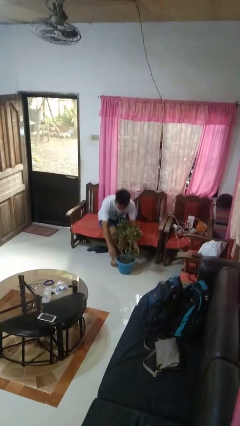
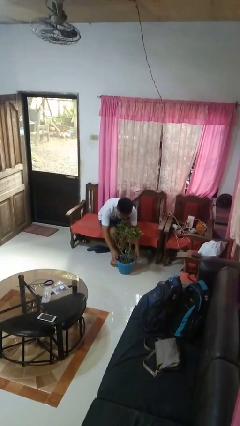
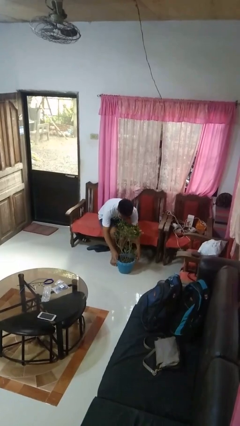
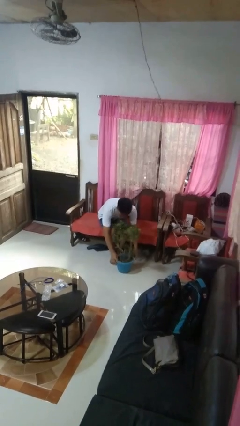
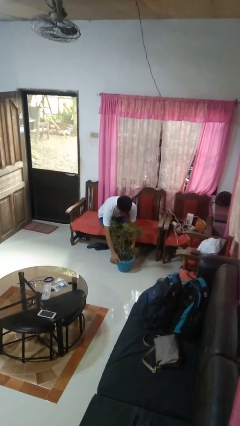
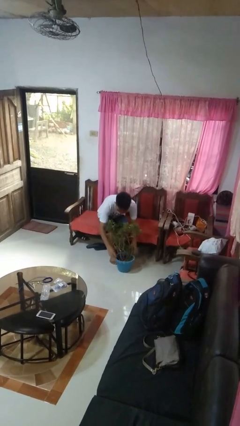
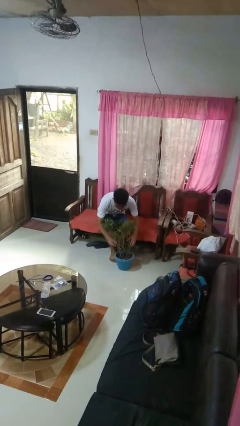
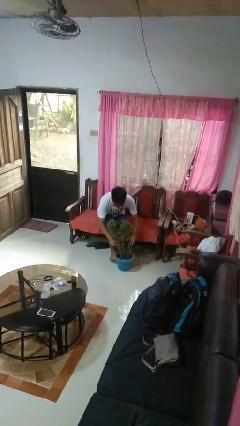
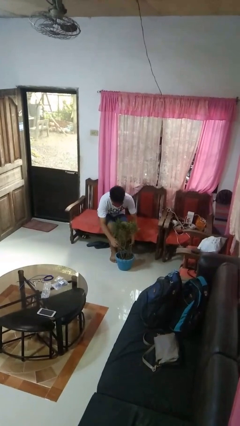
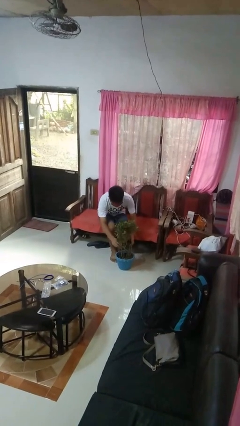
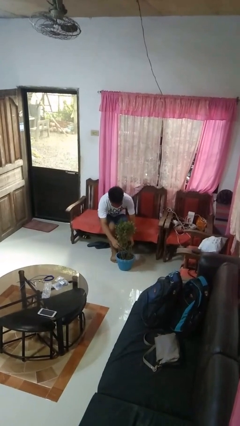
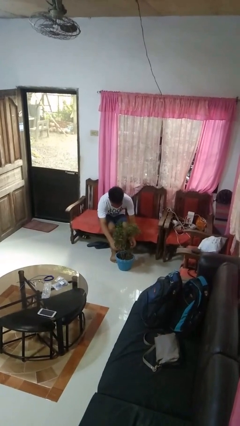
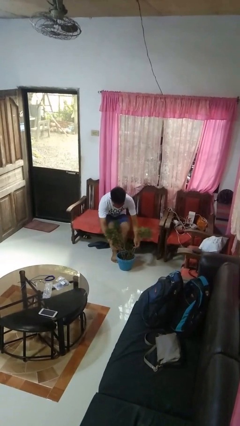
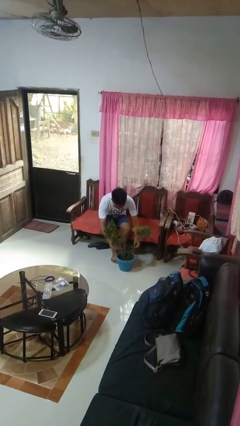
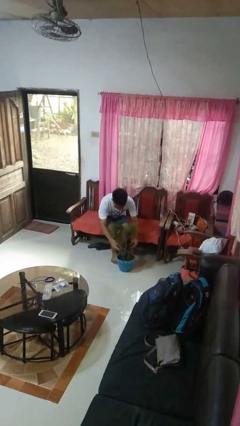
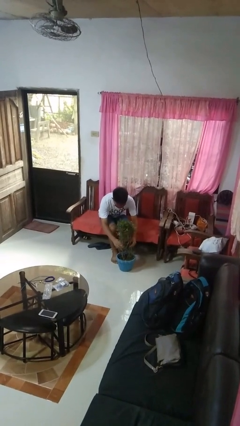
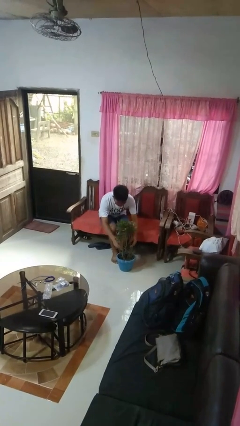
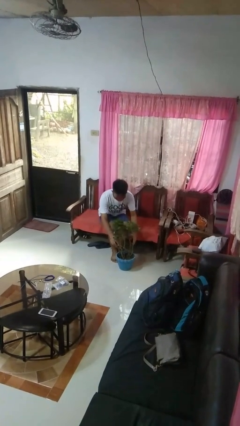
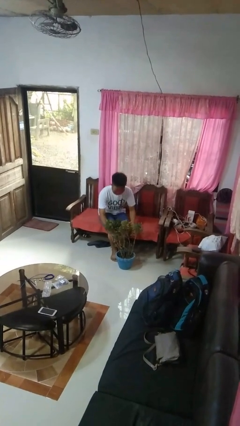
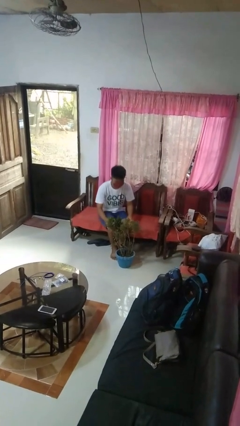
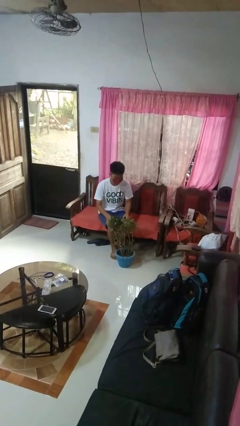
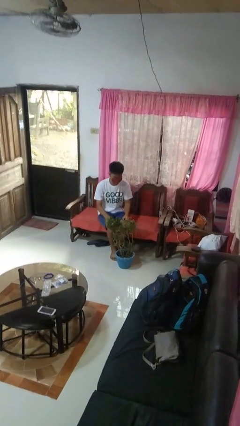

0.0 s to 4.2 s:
person arranges flowers in vase

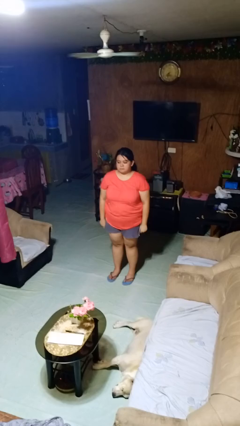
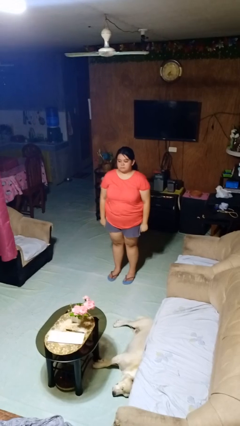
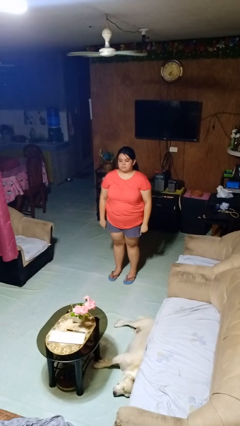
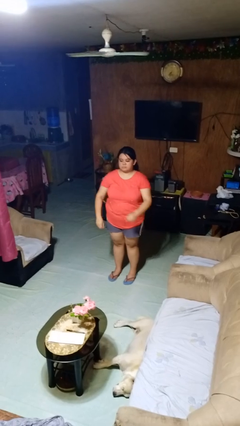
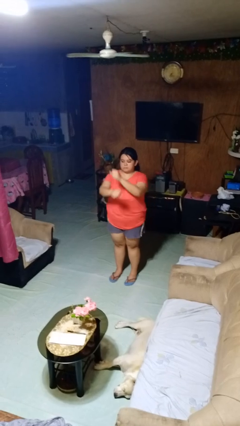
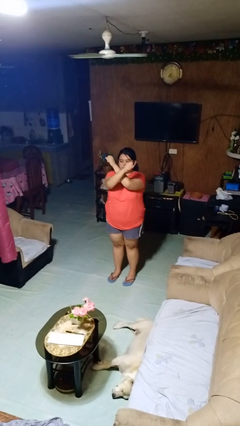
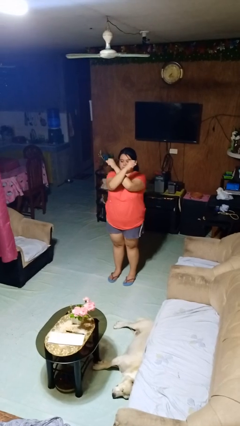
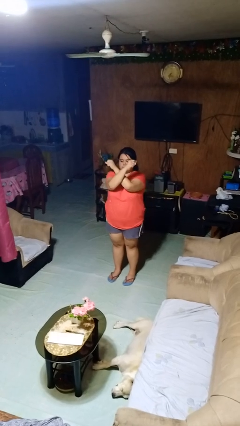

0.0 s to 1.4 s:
person gestures arms x

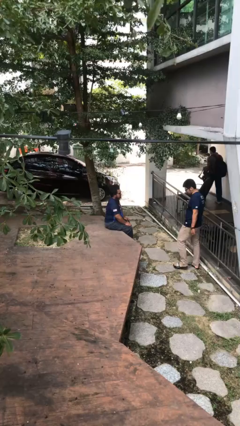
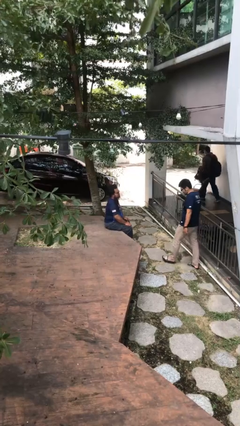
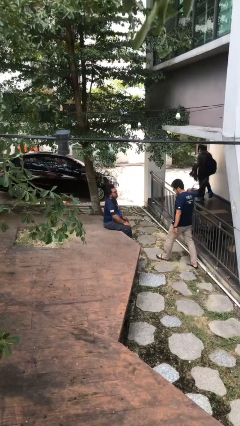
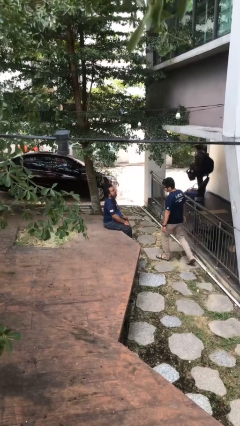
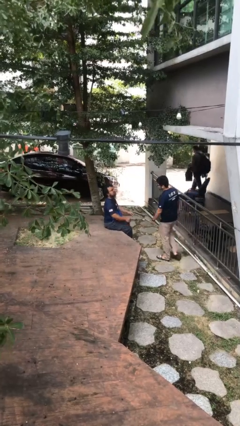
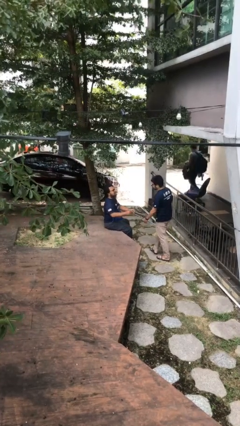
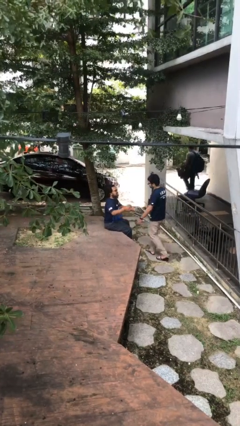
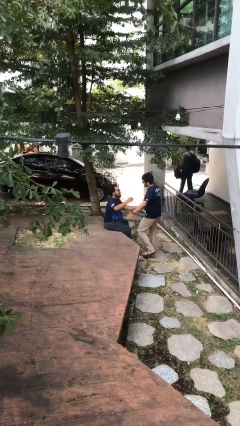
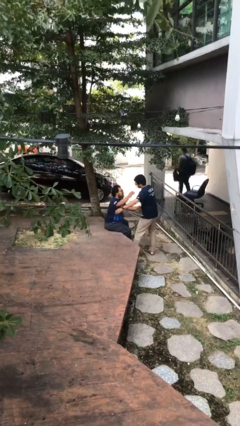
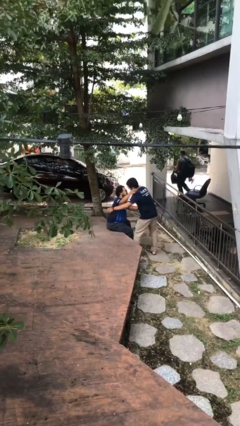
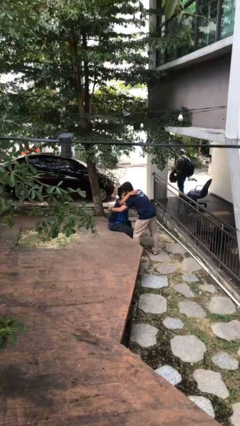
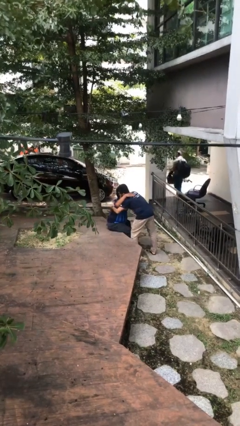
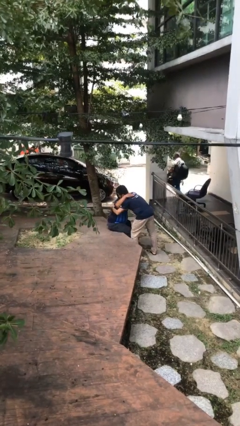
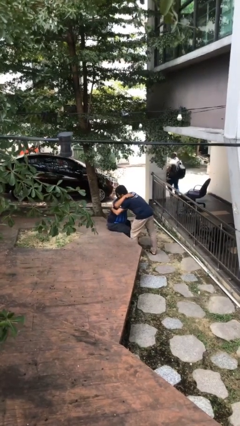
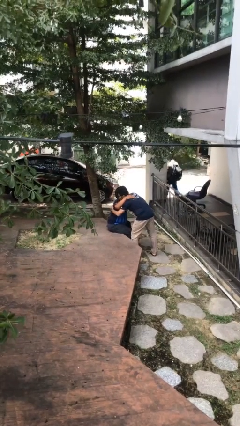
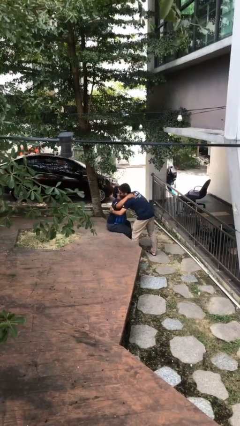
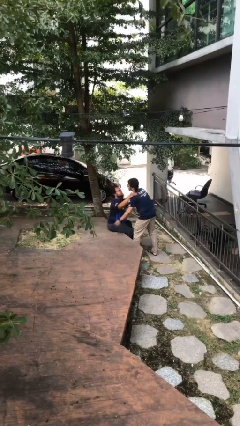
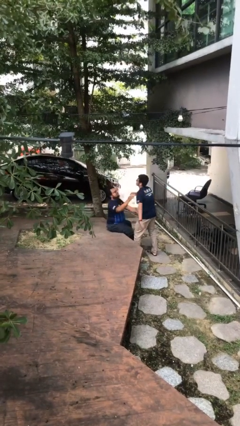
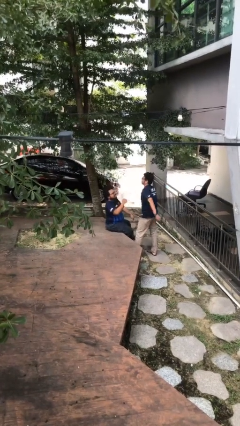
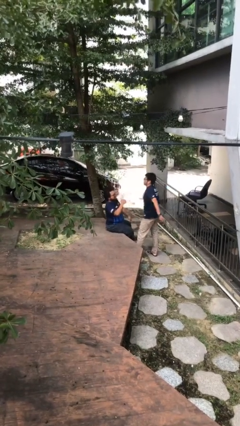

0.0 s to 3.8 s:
person embraces person

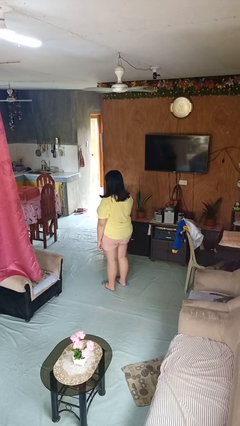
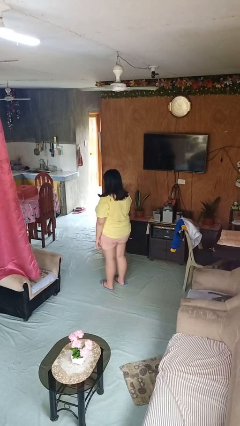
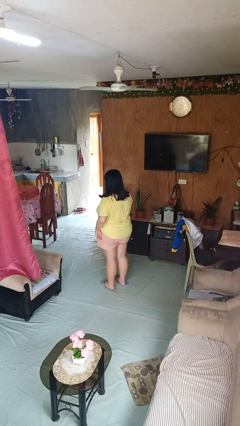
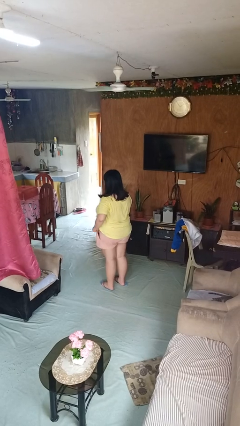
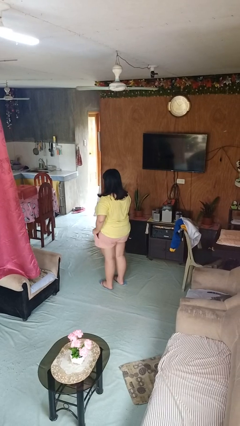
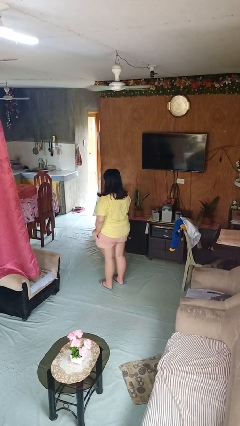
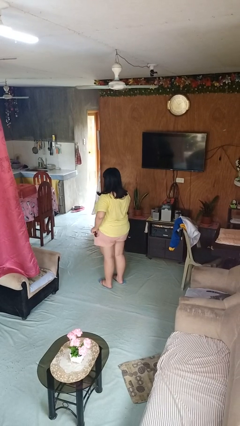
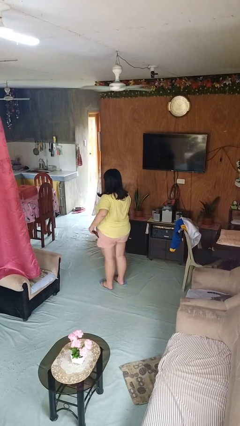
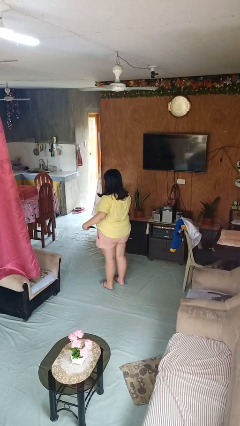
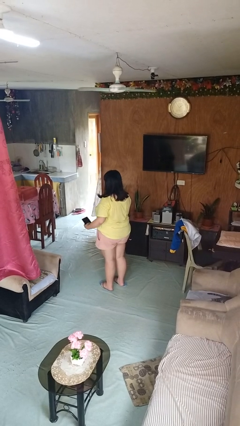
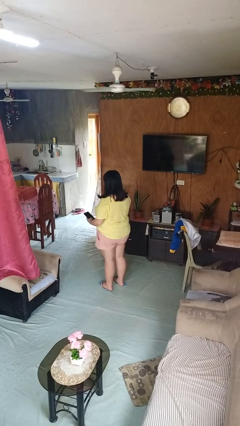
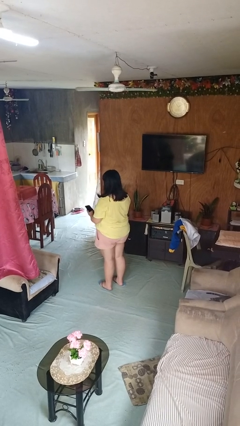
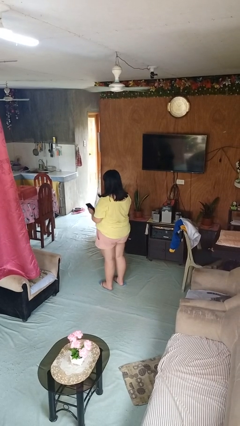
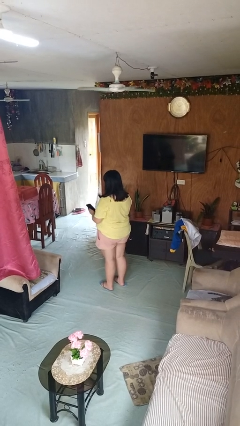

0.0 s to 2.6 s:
person takes phone from pocket

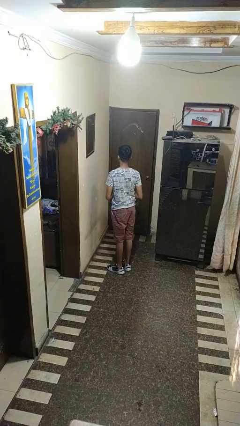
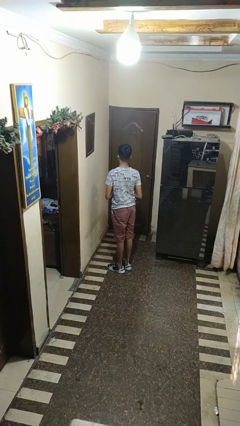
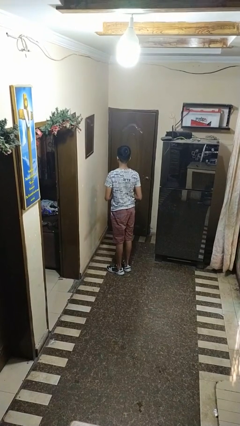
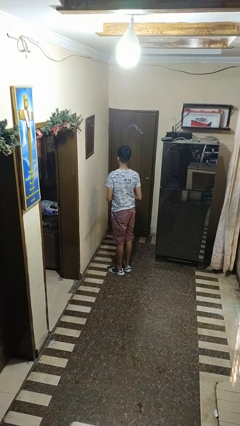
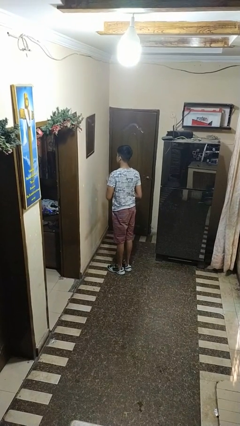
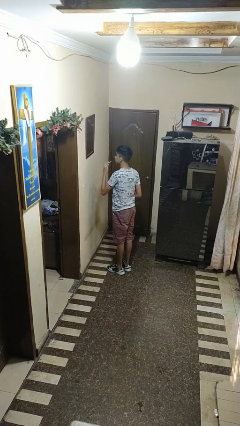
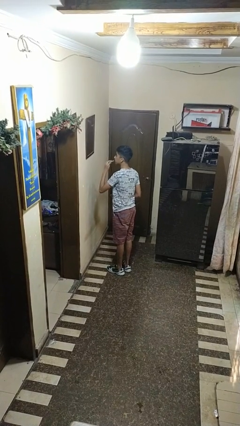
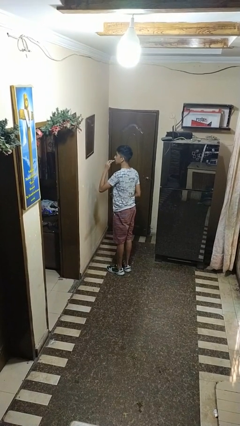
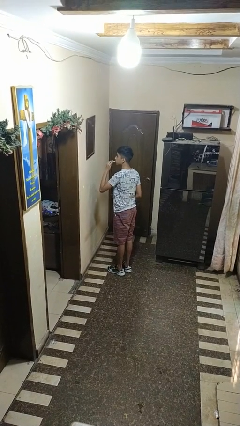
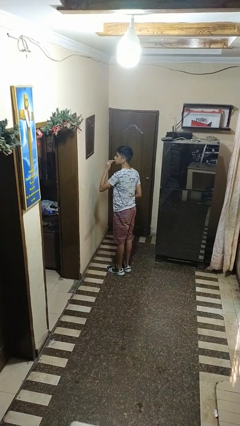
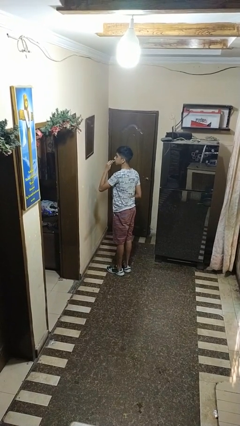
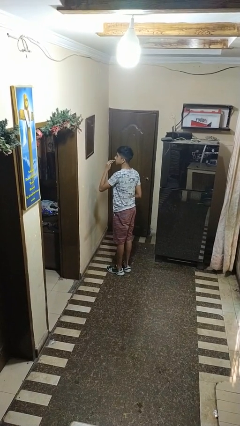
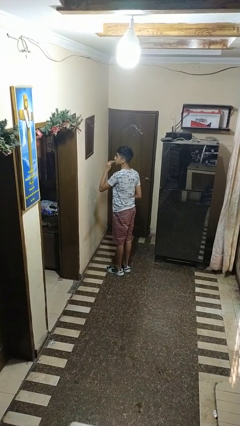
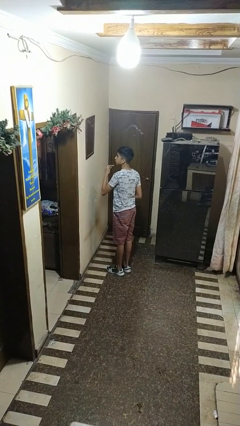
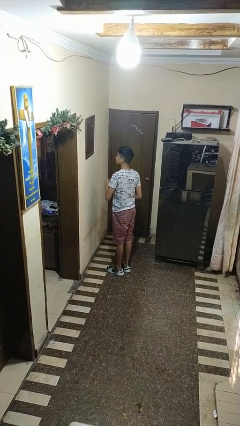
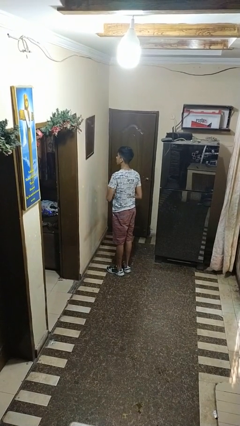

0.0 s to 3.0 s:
person applies lip makeup

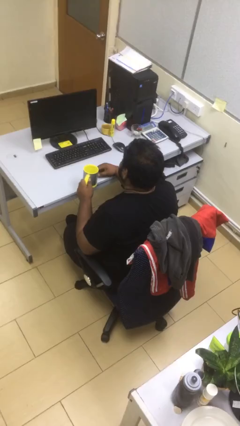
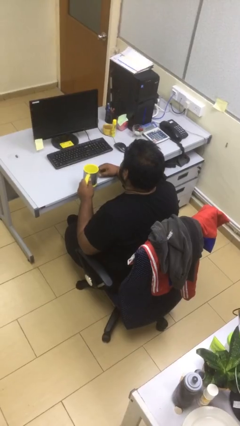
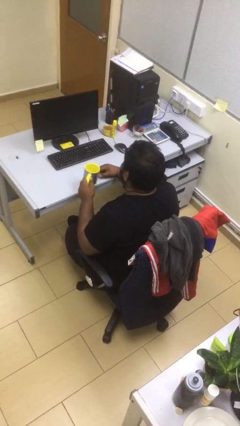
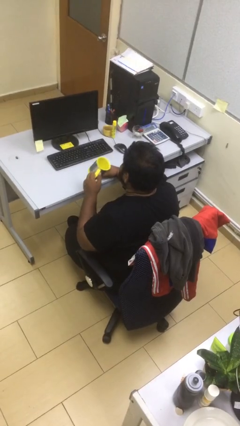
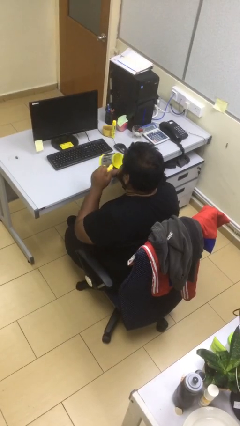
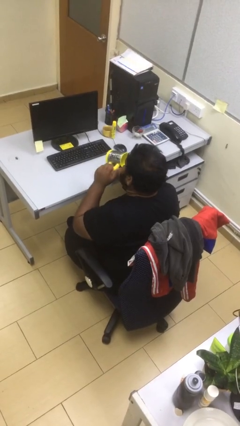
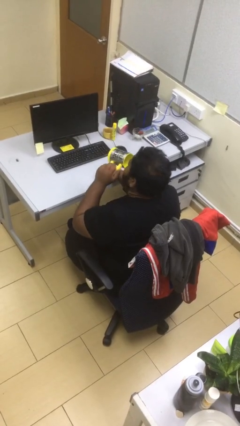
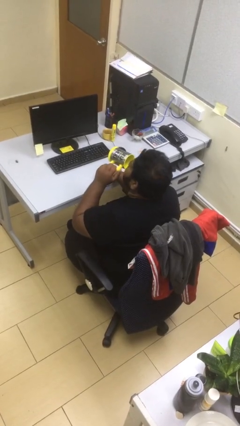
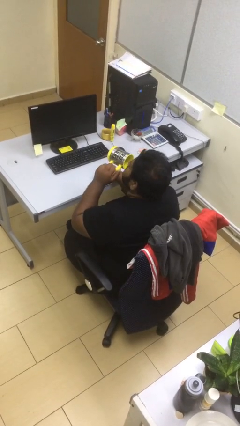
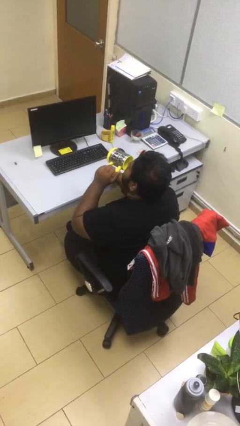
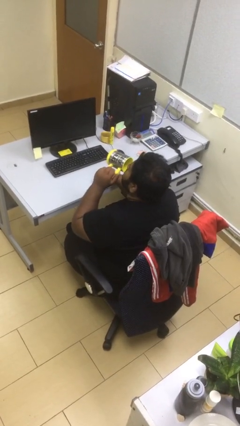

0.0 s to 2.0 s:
person drinks from mug
